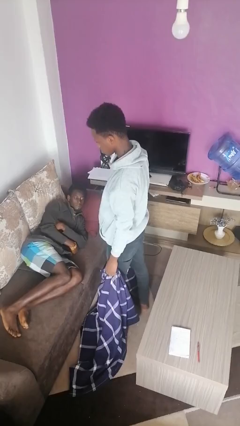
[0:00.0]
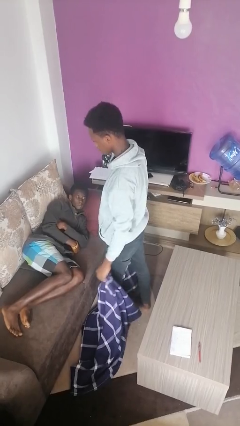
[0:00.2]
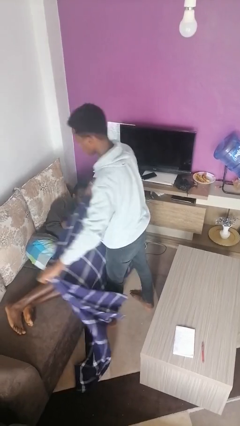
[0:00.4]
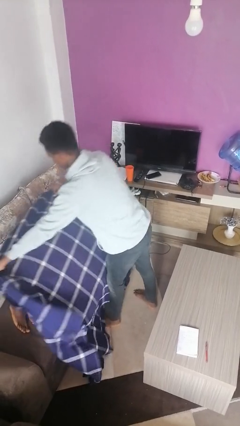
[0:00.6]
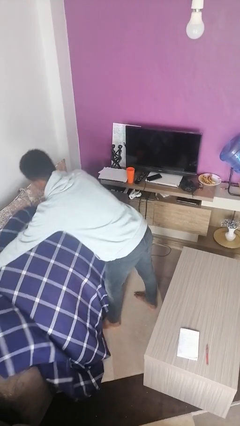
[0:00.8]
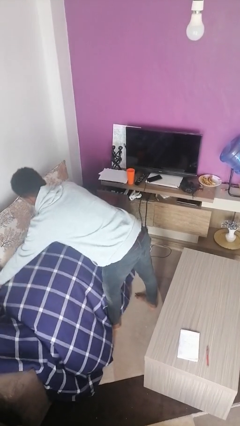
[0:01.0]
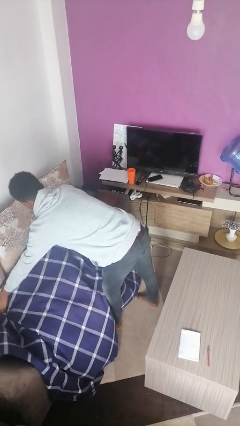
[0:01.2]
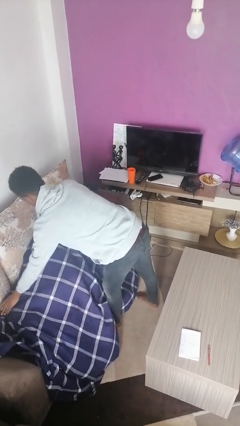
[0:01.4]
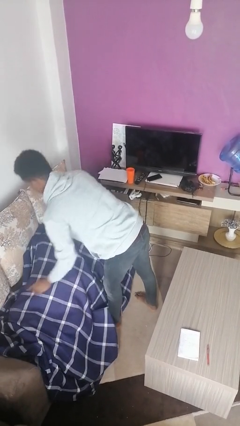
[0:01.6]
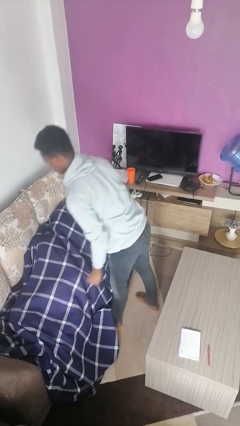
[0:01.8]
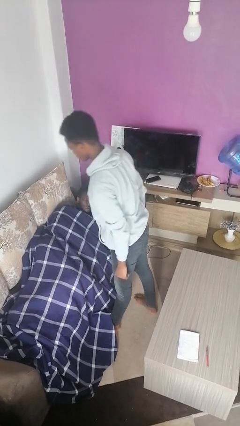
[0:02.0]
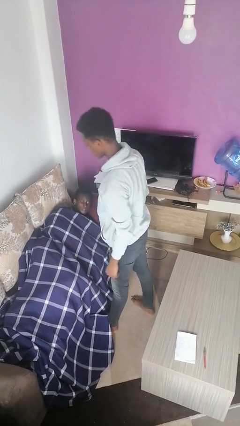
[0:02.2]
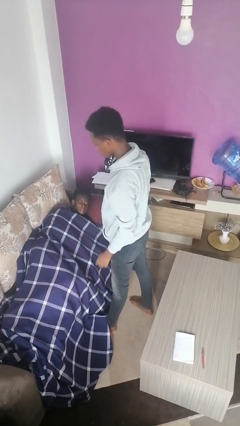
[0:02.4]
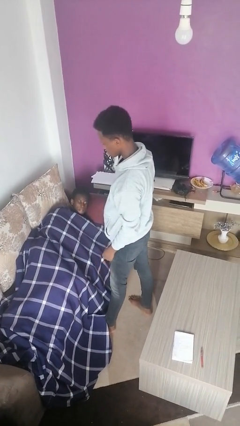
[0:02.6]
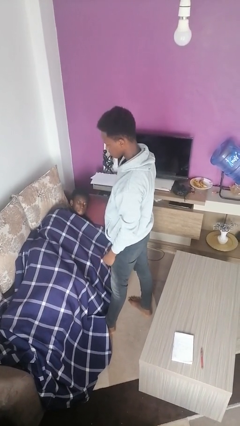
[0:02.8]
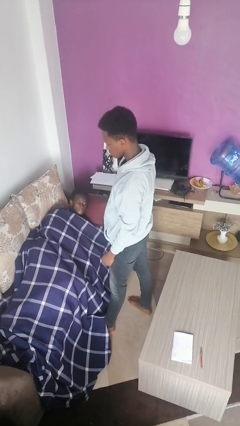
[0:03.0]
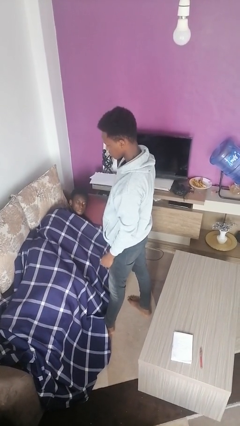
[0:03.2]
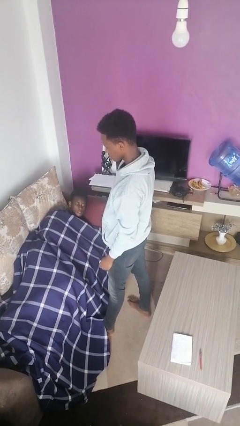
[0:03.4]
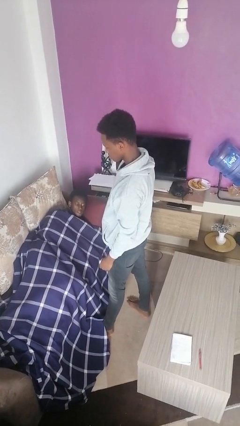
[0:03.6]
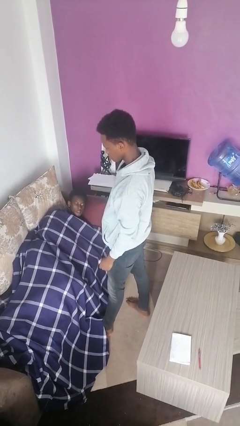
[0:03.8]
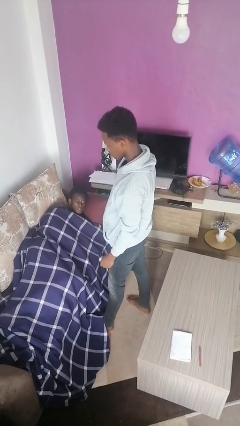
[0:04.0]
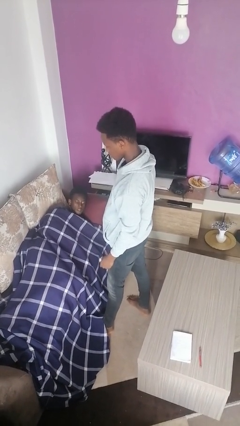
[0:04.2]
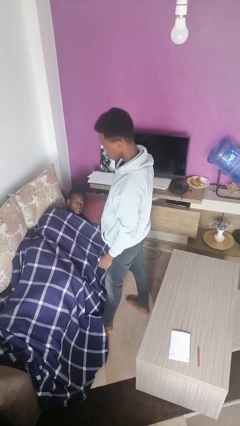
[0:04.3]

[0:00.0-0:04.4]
person covers friend with blanket

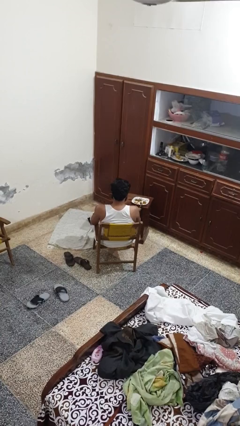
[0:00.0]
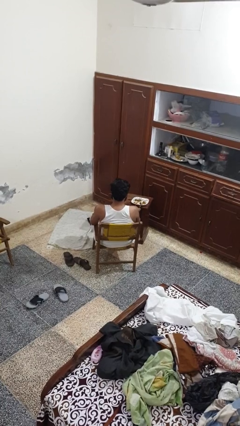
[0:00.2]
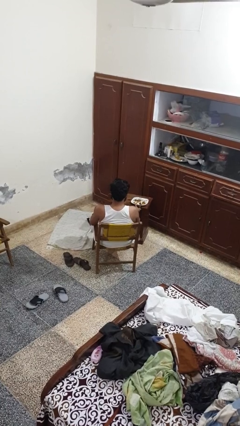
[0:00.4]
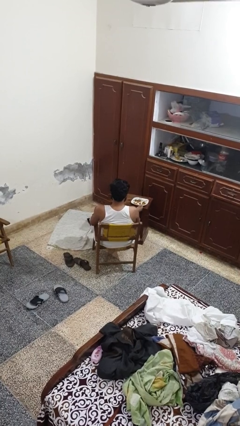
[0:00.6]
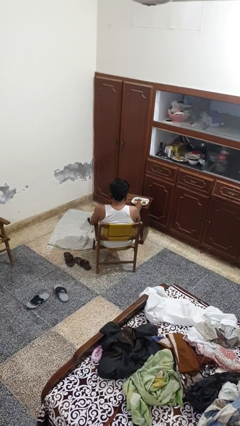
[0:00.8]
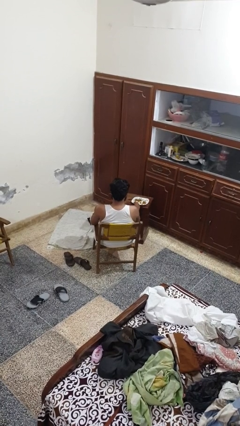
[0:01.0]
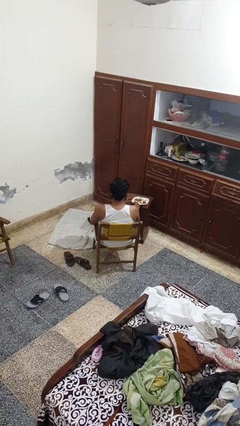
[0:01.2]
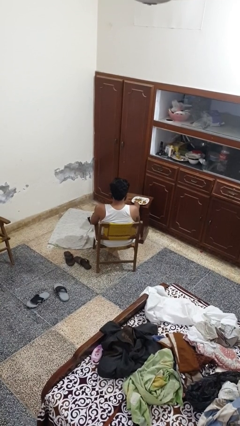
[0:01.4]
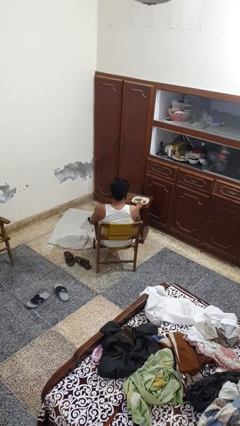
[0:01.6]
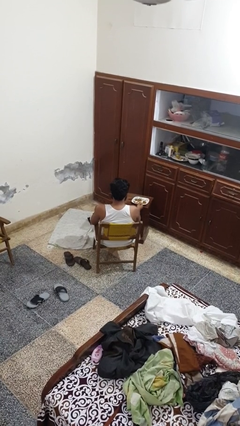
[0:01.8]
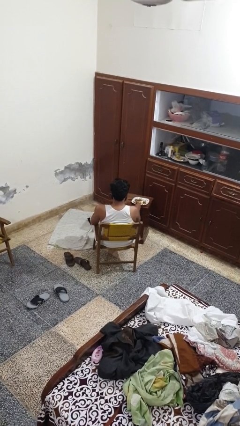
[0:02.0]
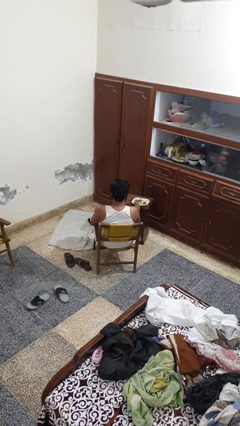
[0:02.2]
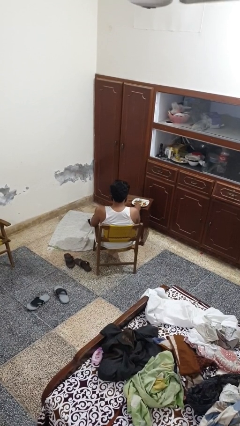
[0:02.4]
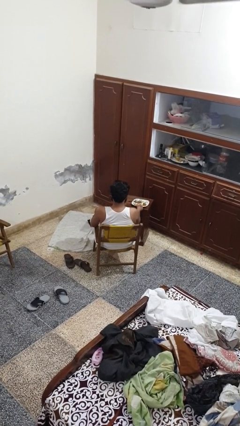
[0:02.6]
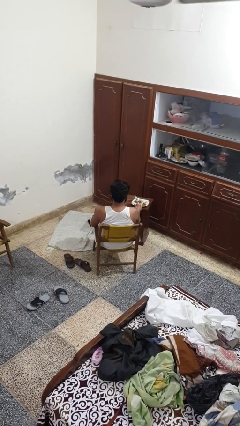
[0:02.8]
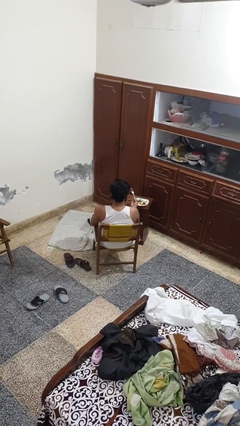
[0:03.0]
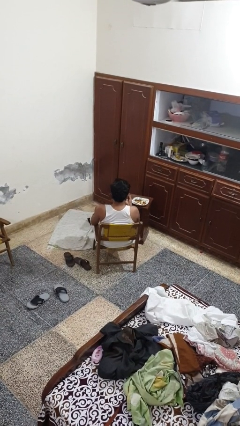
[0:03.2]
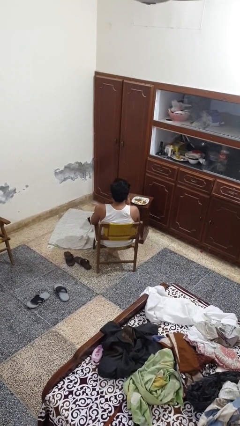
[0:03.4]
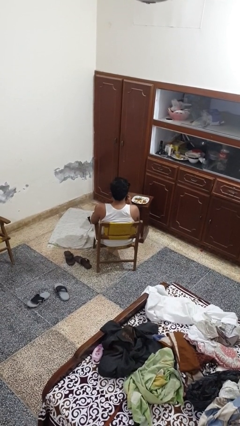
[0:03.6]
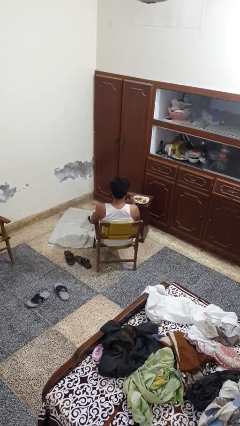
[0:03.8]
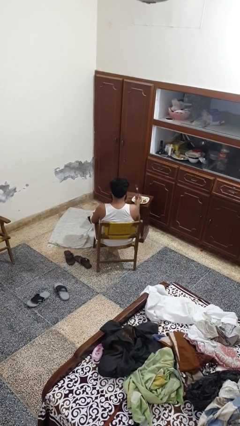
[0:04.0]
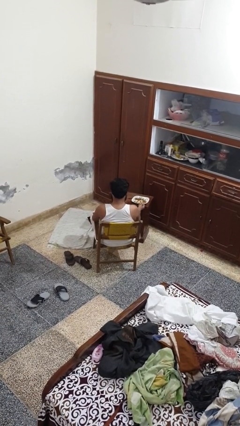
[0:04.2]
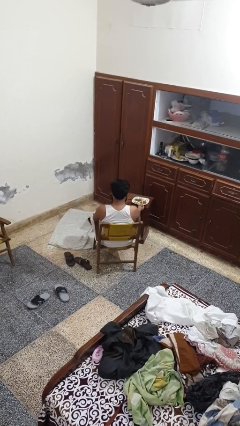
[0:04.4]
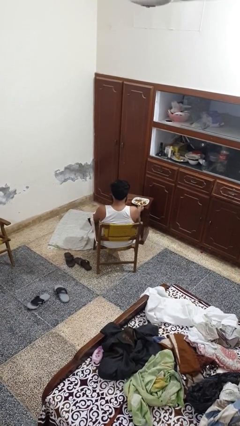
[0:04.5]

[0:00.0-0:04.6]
person eats with utensil

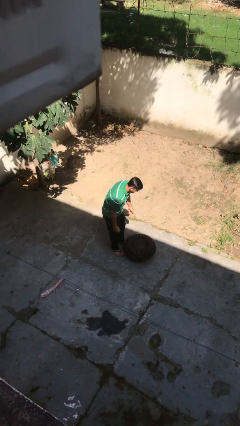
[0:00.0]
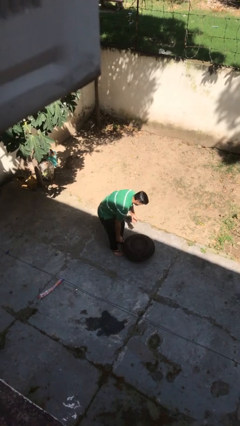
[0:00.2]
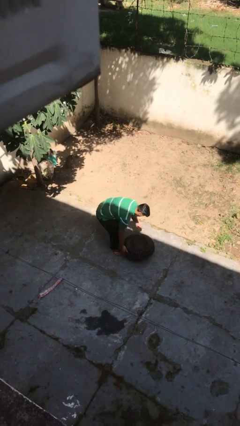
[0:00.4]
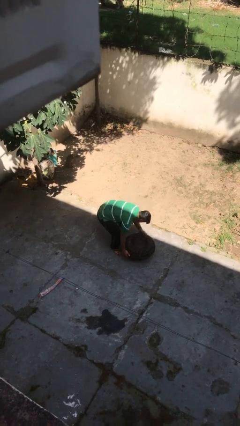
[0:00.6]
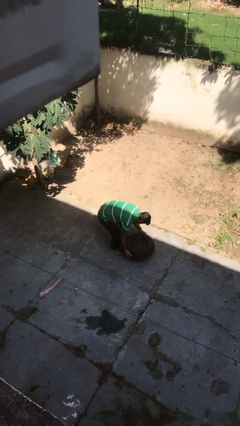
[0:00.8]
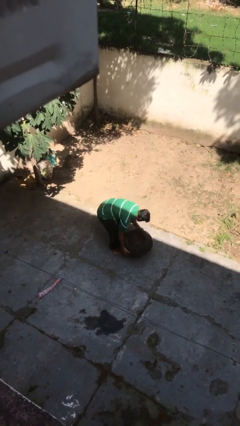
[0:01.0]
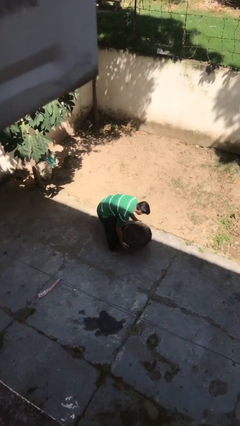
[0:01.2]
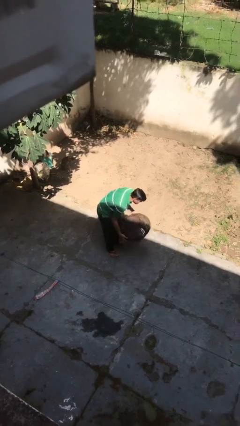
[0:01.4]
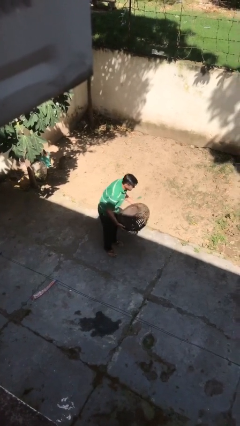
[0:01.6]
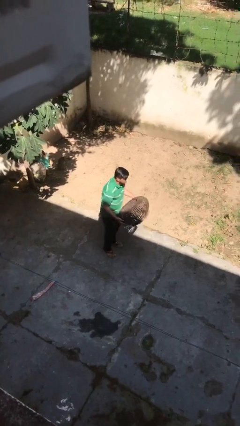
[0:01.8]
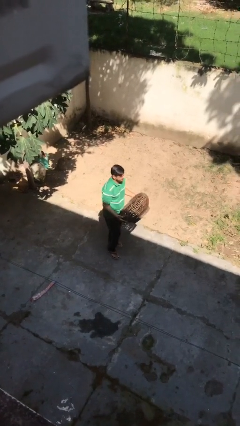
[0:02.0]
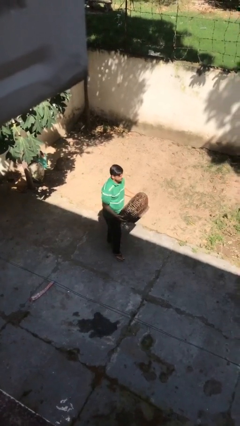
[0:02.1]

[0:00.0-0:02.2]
person picks up object from floor

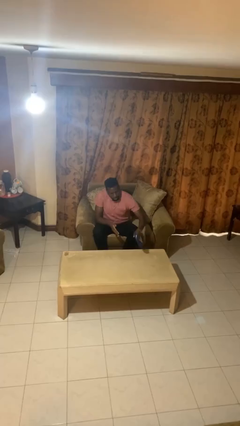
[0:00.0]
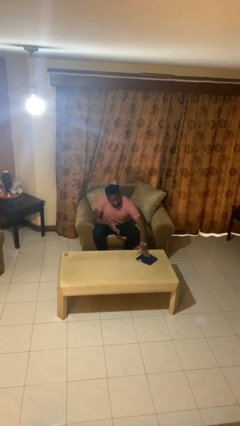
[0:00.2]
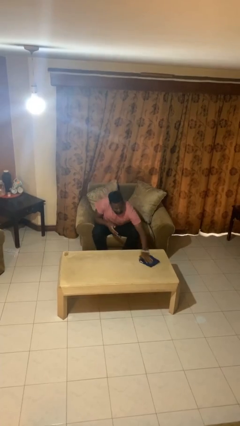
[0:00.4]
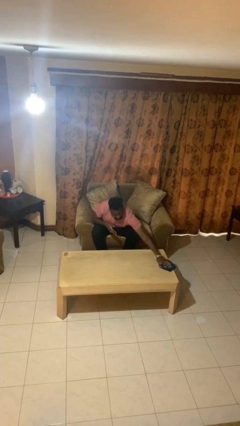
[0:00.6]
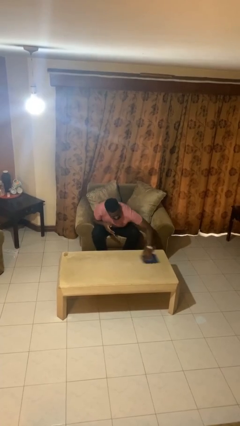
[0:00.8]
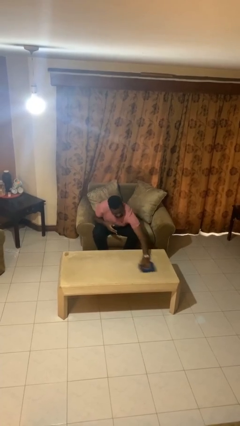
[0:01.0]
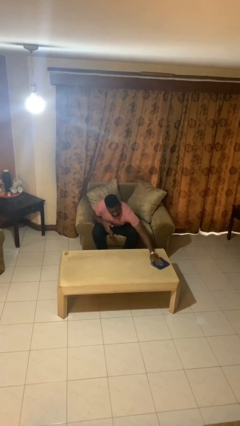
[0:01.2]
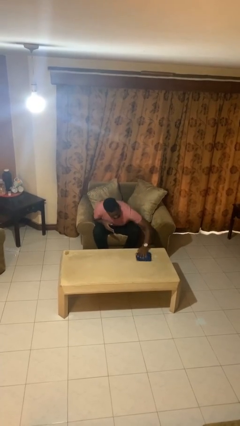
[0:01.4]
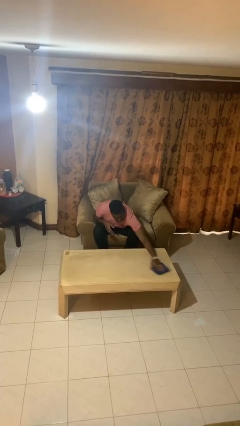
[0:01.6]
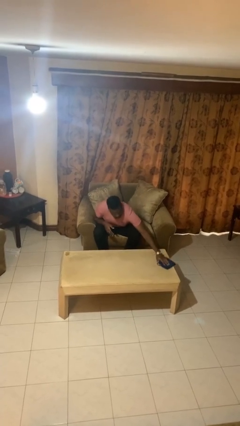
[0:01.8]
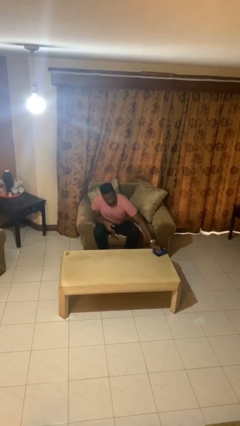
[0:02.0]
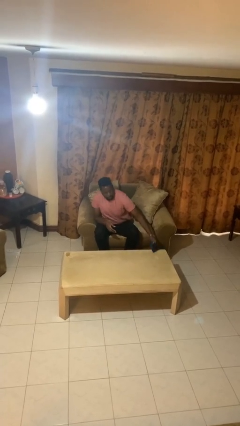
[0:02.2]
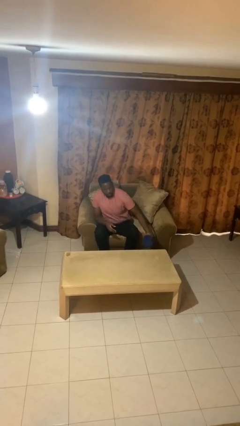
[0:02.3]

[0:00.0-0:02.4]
person cleans table with rag

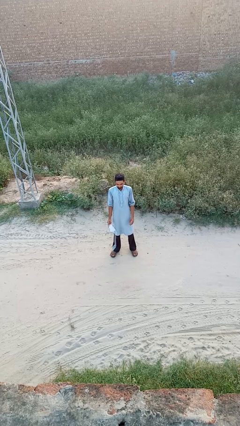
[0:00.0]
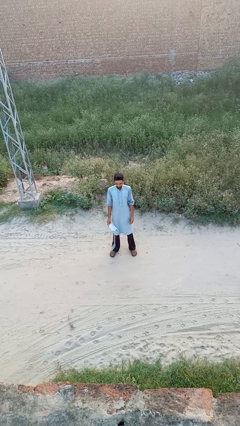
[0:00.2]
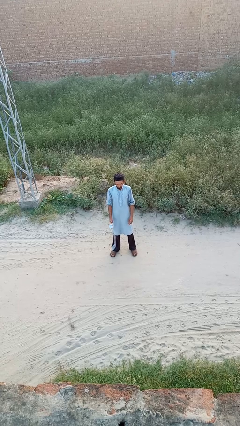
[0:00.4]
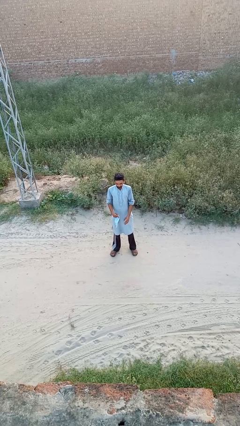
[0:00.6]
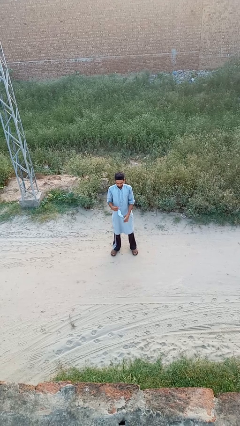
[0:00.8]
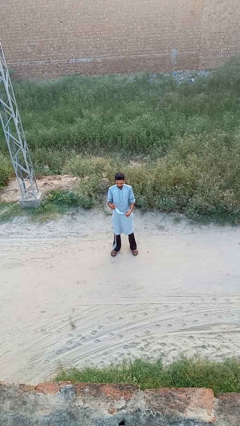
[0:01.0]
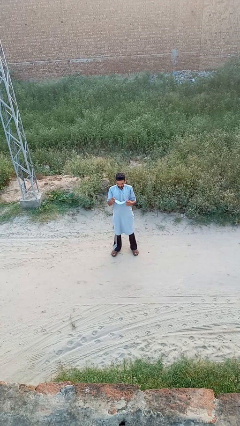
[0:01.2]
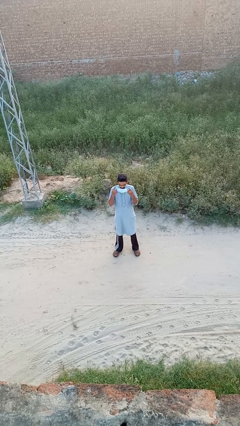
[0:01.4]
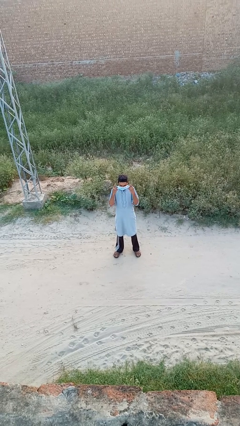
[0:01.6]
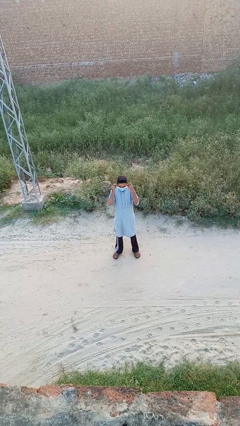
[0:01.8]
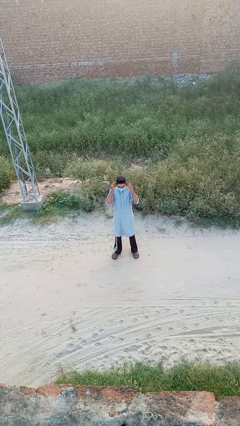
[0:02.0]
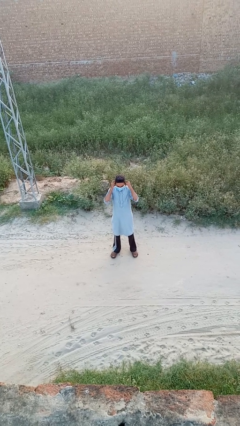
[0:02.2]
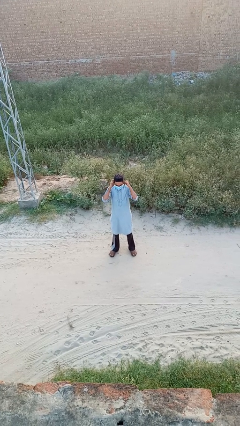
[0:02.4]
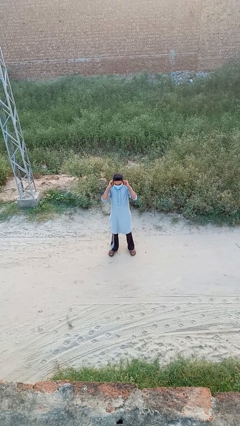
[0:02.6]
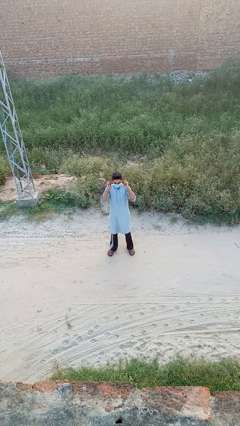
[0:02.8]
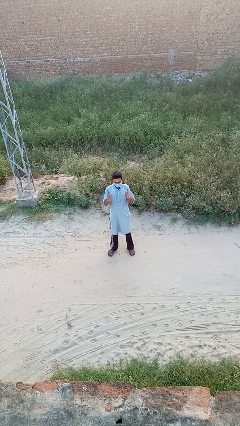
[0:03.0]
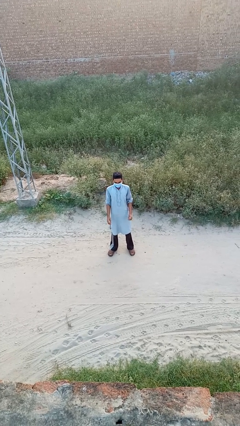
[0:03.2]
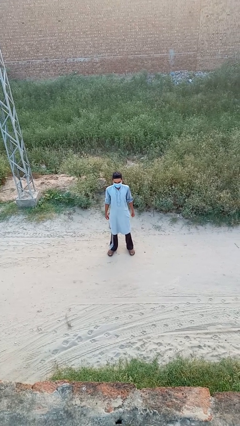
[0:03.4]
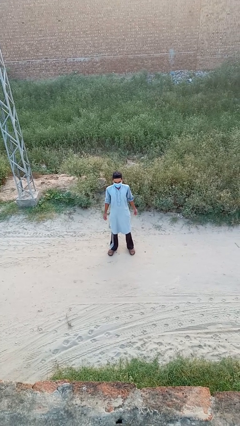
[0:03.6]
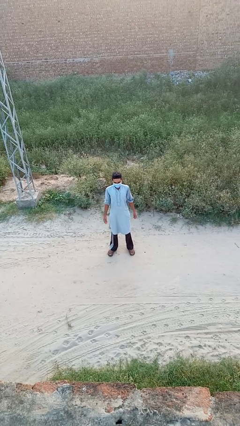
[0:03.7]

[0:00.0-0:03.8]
person puts on facemask
